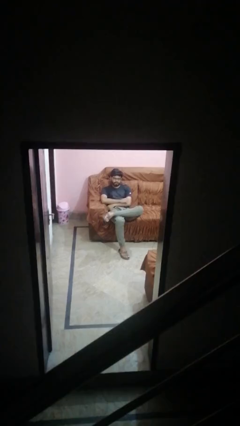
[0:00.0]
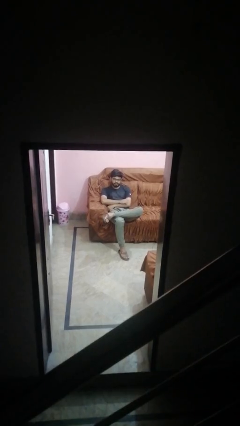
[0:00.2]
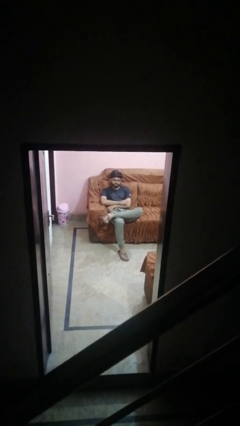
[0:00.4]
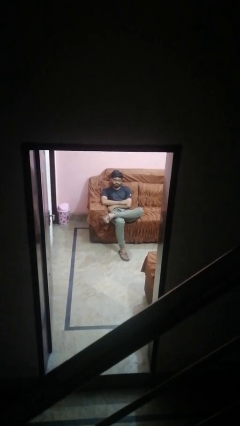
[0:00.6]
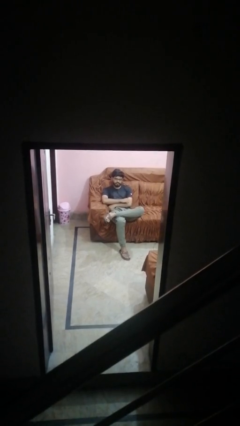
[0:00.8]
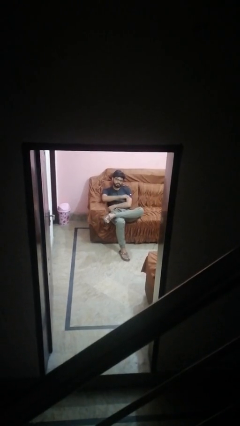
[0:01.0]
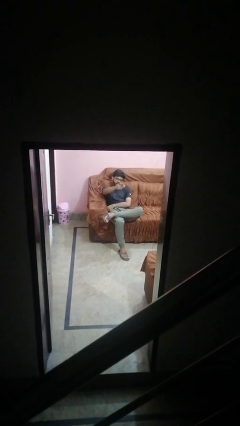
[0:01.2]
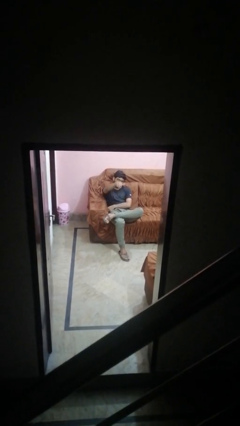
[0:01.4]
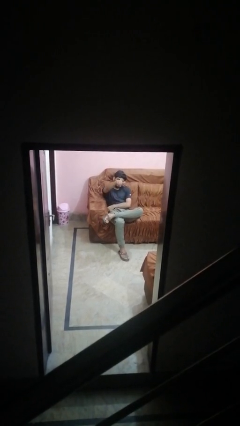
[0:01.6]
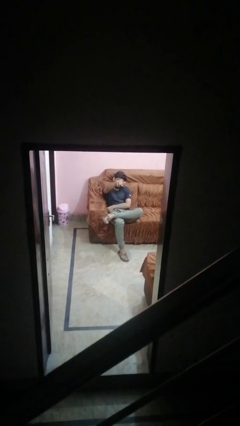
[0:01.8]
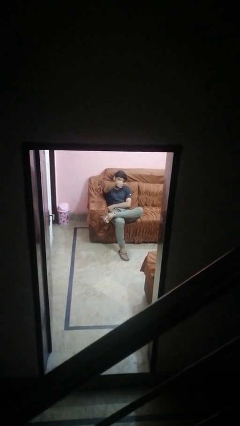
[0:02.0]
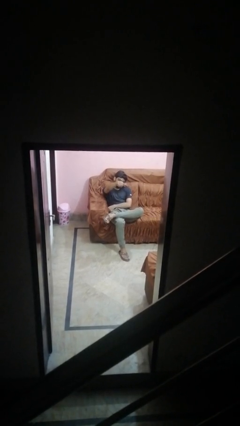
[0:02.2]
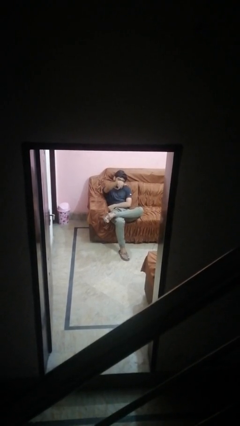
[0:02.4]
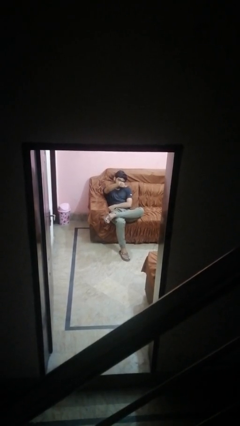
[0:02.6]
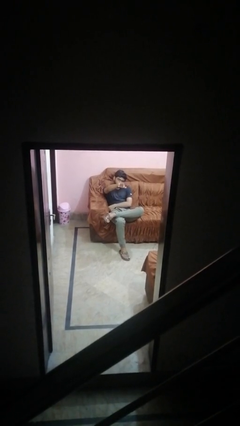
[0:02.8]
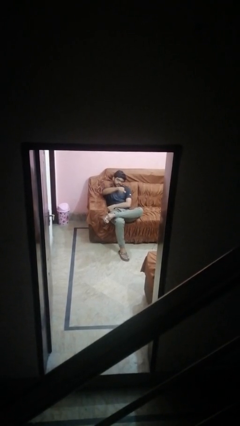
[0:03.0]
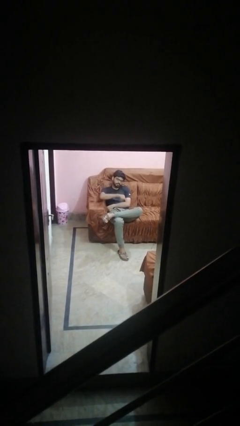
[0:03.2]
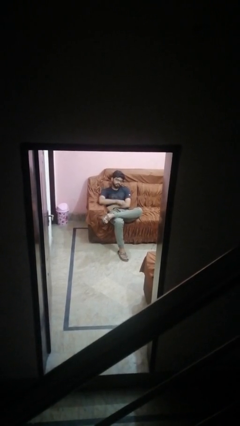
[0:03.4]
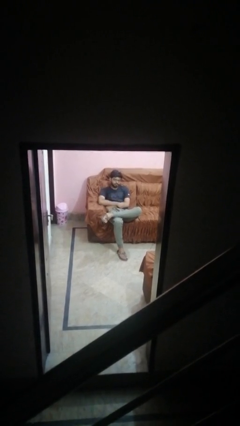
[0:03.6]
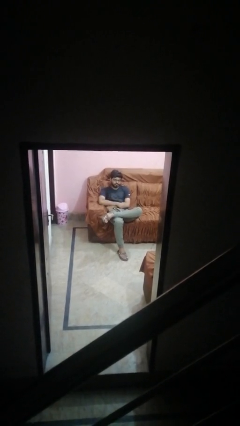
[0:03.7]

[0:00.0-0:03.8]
person gestures come here

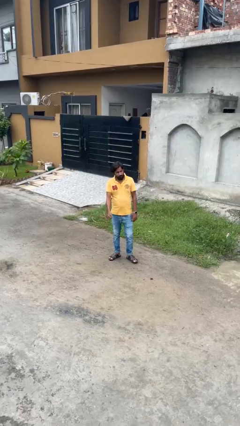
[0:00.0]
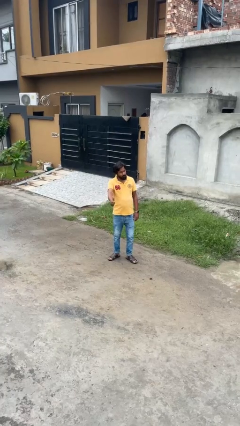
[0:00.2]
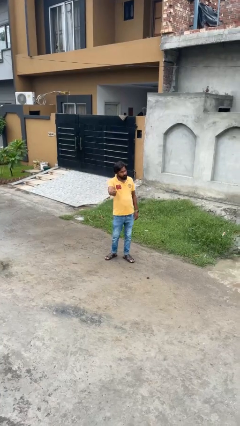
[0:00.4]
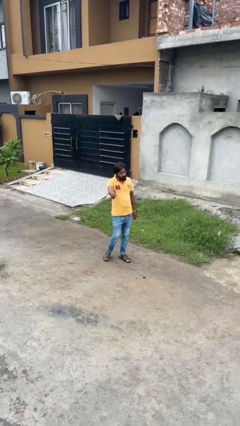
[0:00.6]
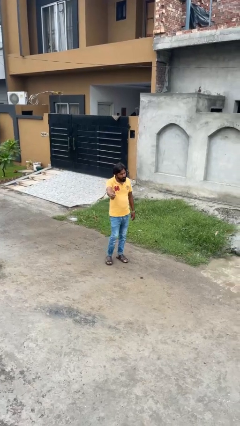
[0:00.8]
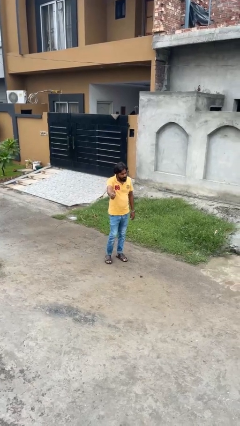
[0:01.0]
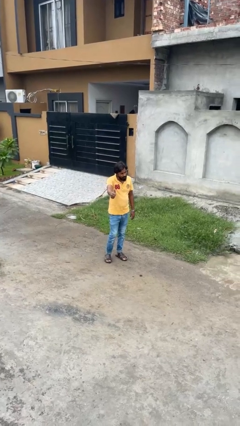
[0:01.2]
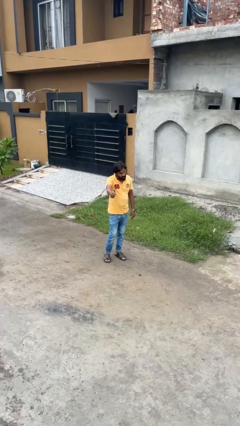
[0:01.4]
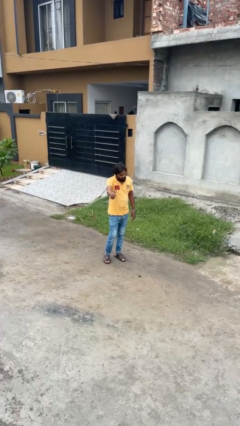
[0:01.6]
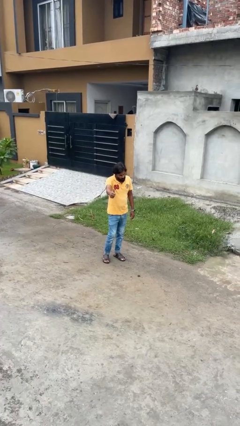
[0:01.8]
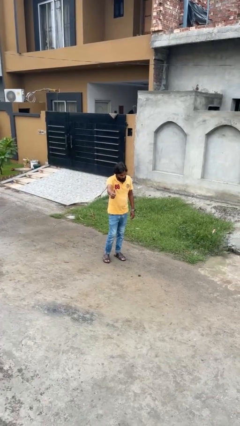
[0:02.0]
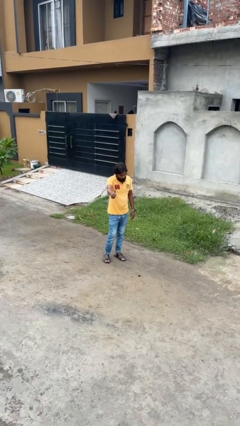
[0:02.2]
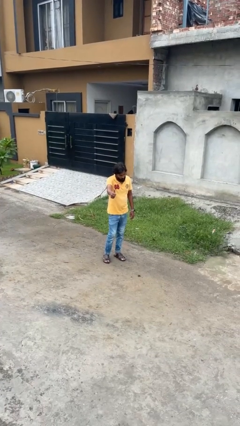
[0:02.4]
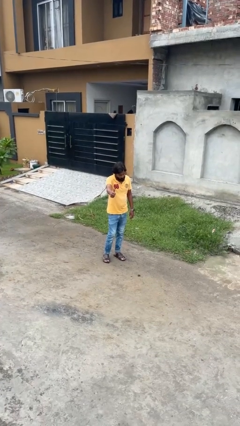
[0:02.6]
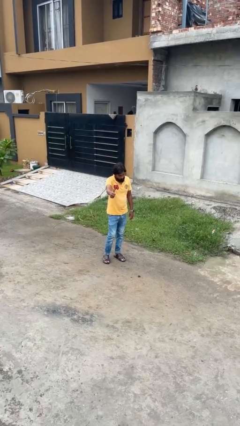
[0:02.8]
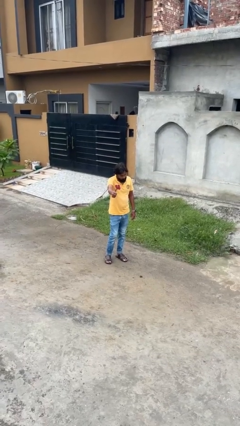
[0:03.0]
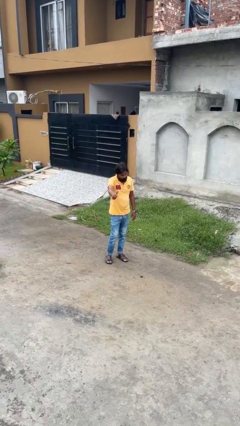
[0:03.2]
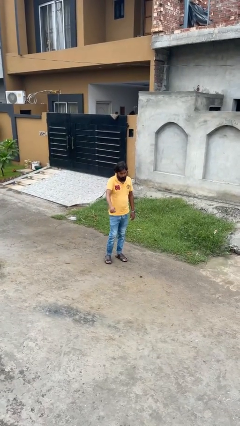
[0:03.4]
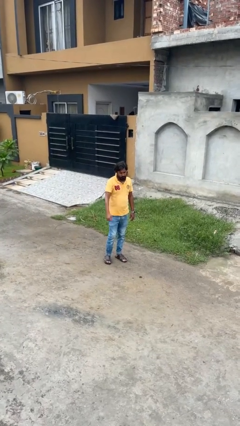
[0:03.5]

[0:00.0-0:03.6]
person gestures thumbs up

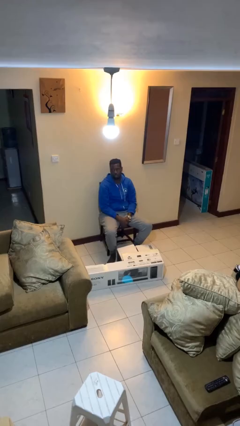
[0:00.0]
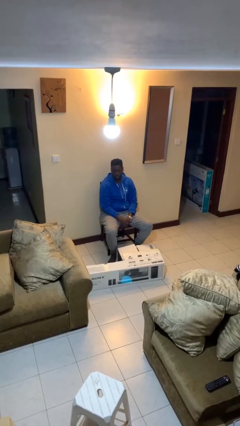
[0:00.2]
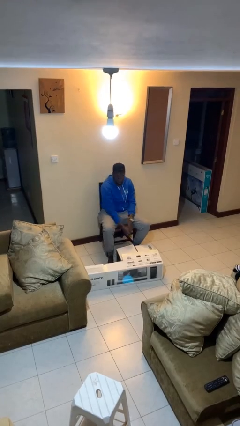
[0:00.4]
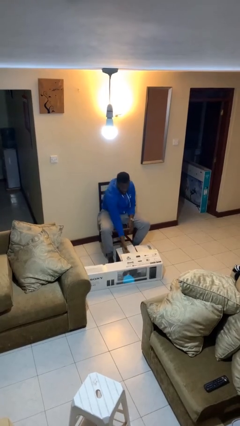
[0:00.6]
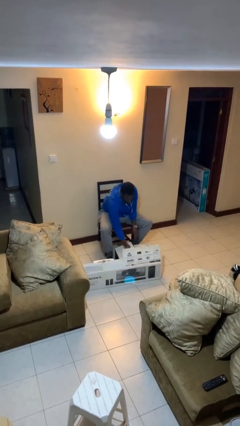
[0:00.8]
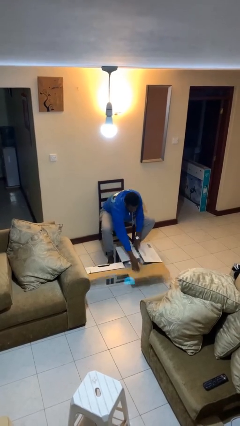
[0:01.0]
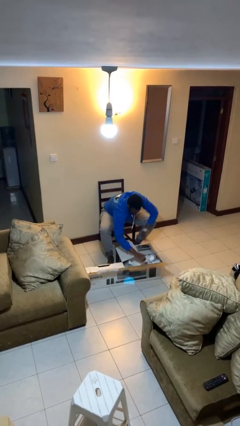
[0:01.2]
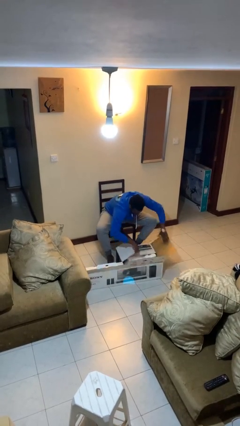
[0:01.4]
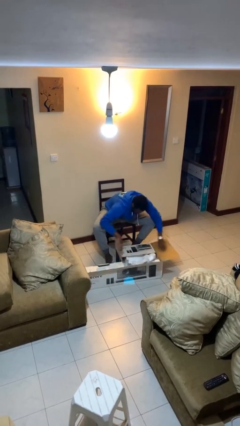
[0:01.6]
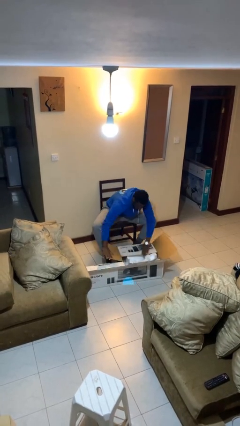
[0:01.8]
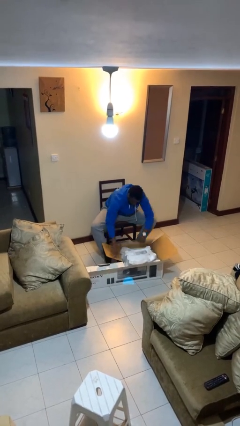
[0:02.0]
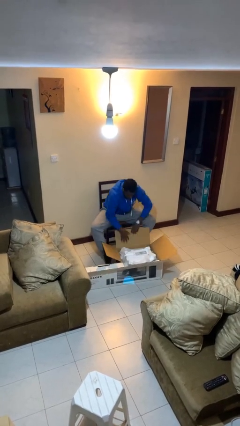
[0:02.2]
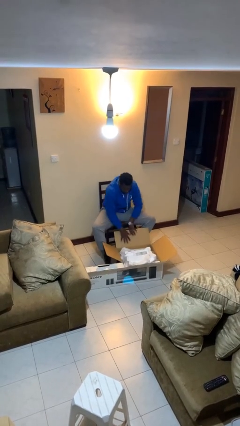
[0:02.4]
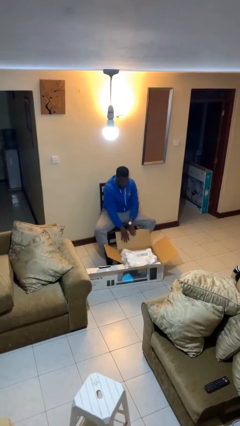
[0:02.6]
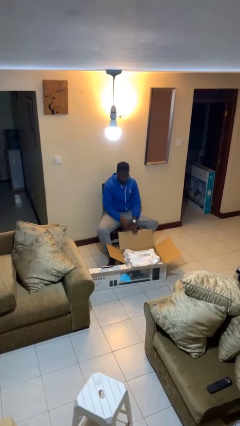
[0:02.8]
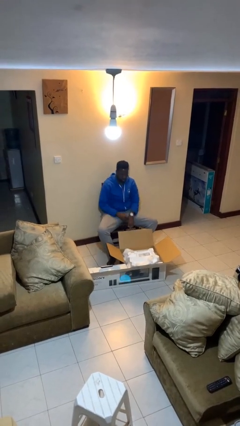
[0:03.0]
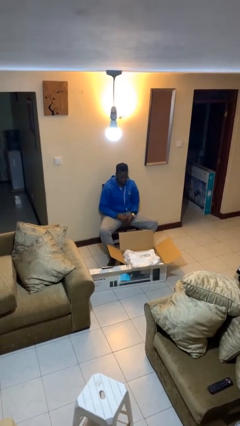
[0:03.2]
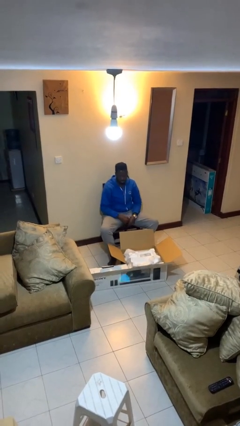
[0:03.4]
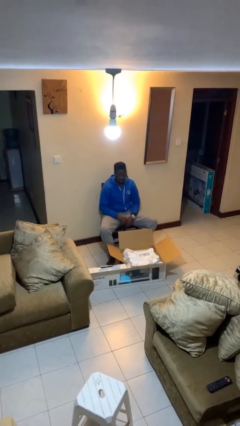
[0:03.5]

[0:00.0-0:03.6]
person opens box

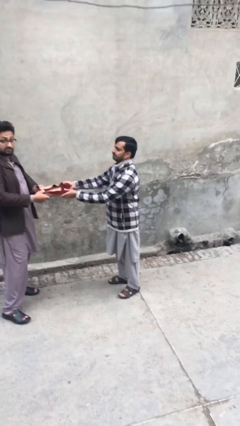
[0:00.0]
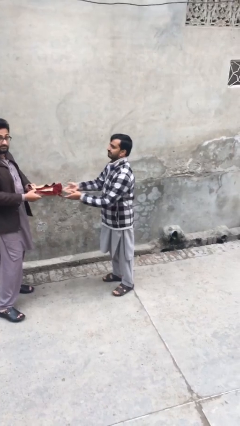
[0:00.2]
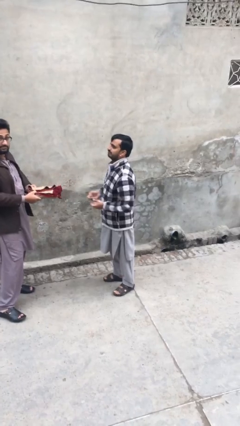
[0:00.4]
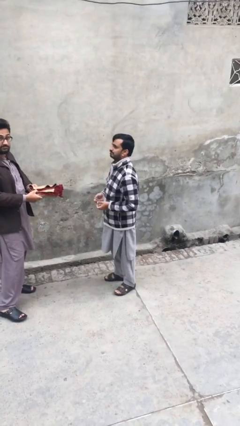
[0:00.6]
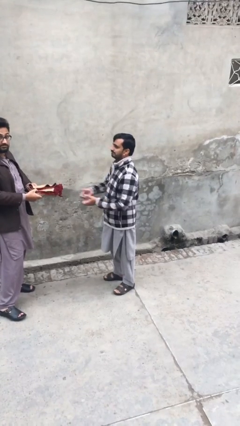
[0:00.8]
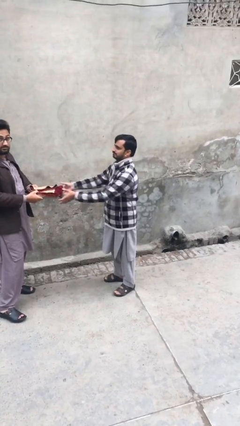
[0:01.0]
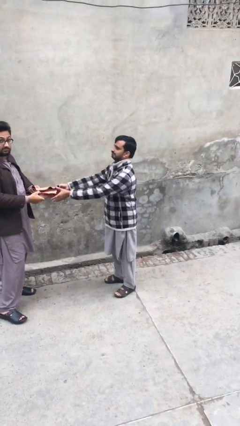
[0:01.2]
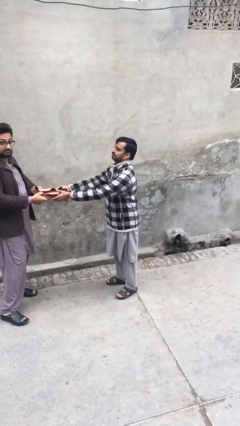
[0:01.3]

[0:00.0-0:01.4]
person transfers object to person

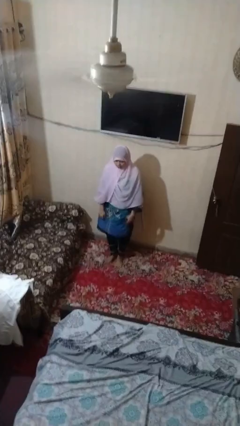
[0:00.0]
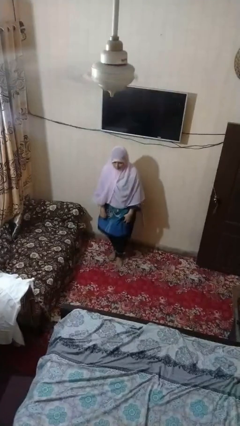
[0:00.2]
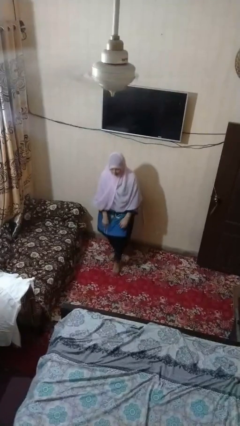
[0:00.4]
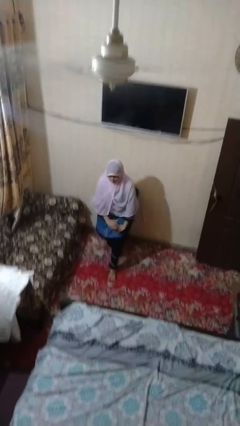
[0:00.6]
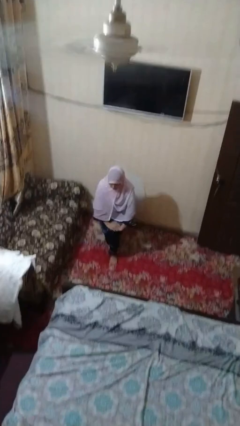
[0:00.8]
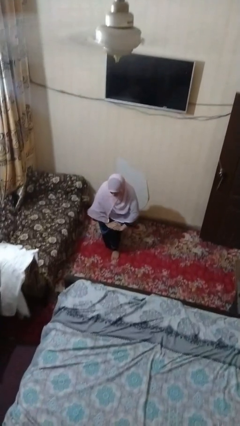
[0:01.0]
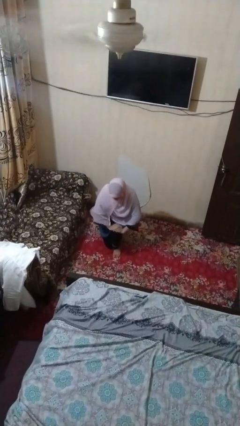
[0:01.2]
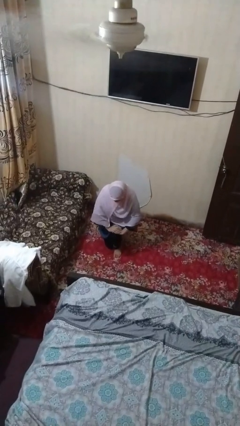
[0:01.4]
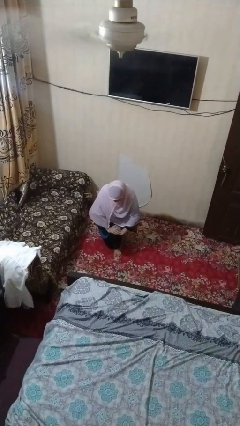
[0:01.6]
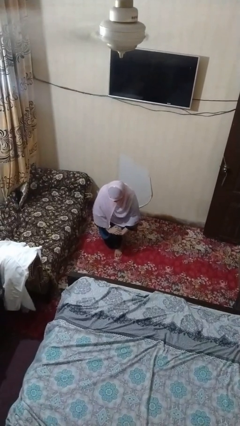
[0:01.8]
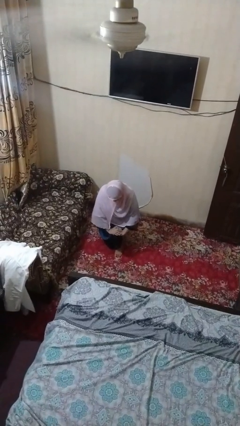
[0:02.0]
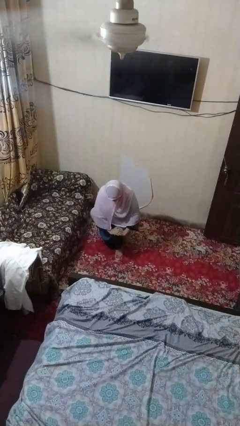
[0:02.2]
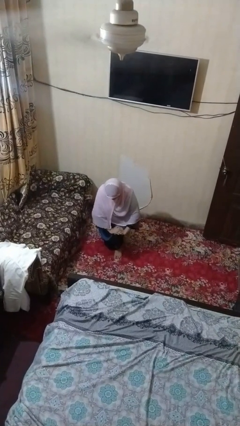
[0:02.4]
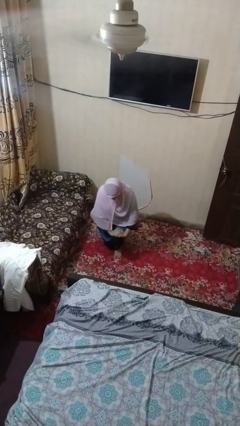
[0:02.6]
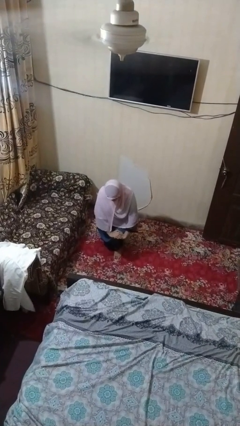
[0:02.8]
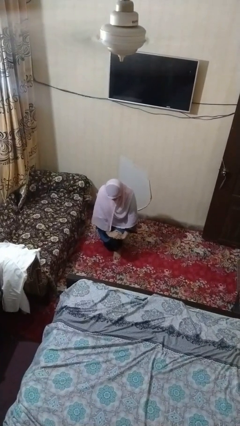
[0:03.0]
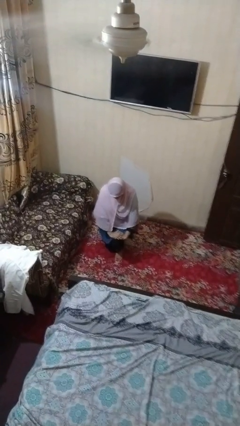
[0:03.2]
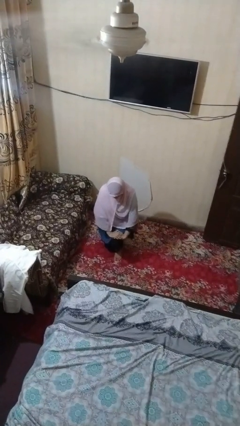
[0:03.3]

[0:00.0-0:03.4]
person exercises with lunges

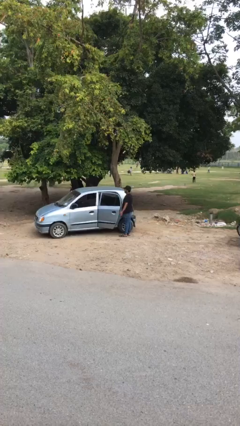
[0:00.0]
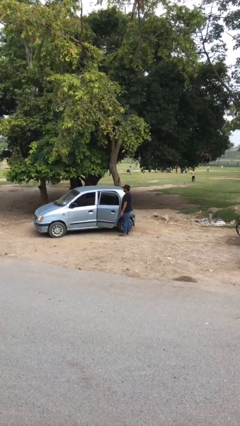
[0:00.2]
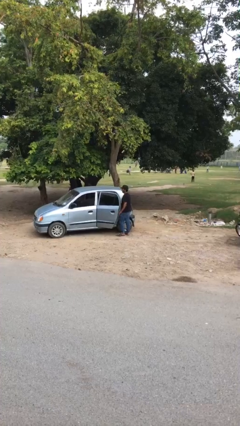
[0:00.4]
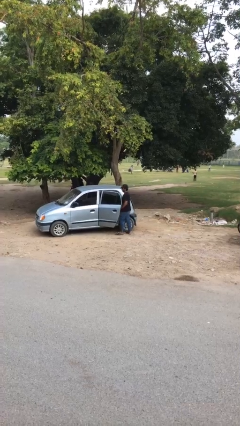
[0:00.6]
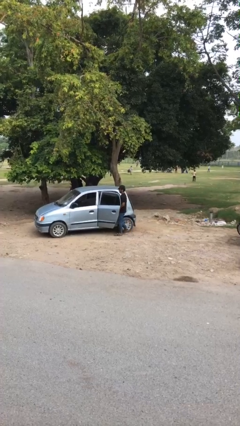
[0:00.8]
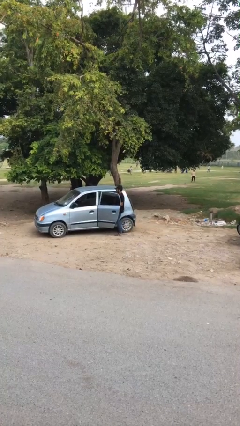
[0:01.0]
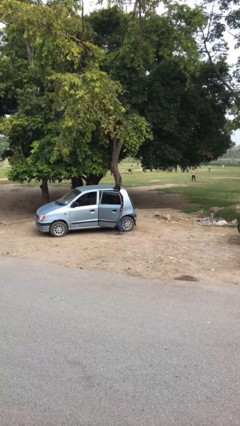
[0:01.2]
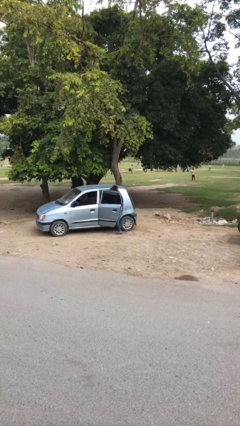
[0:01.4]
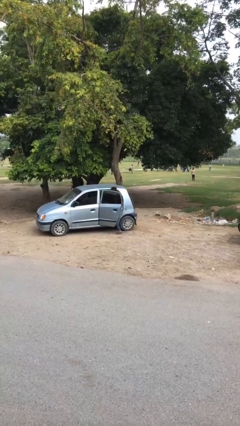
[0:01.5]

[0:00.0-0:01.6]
person enters car

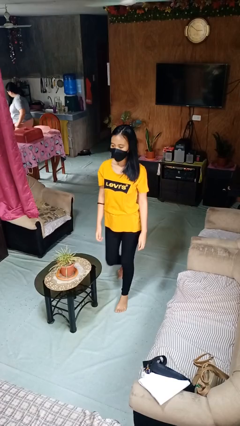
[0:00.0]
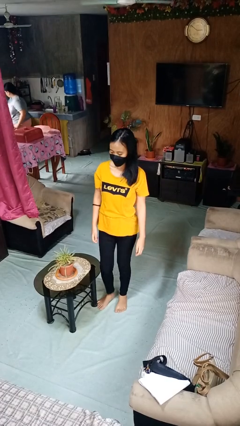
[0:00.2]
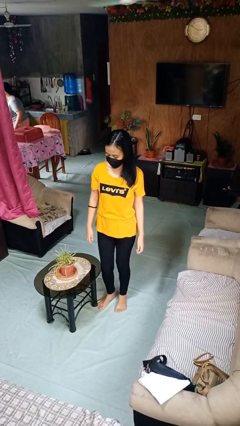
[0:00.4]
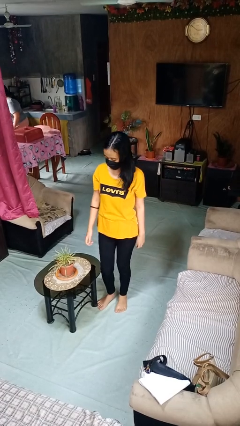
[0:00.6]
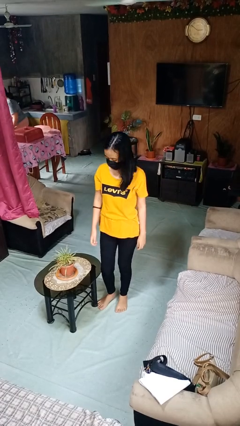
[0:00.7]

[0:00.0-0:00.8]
person bumps into table
